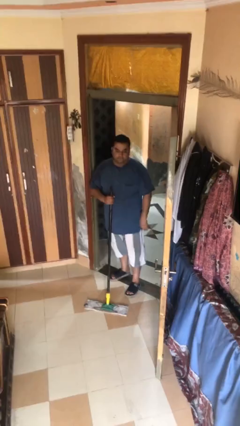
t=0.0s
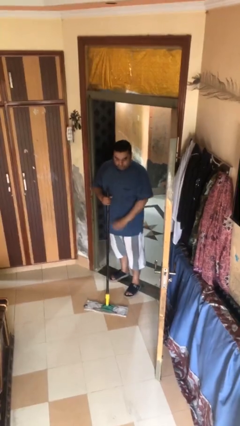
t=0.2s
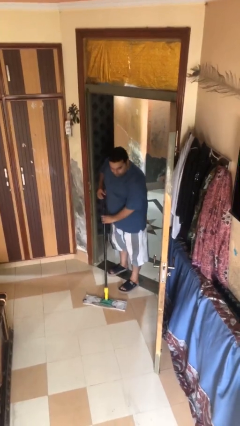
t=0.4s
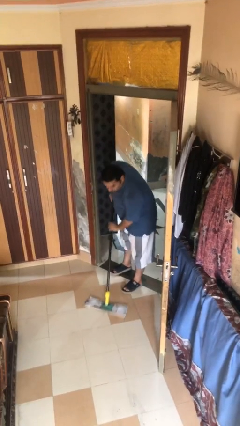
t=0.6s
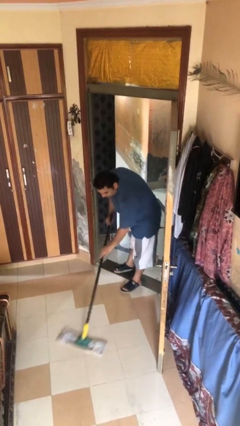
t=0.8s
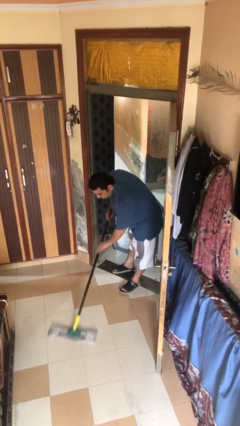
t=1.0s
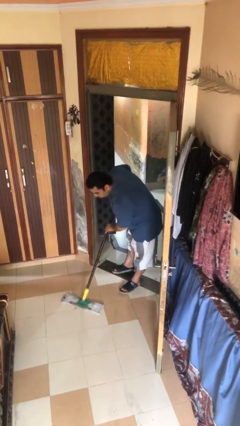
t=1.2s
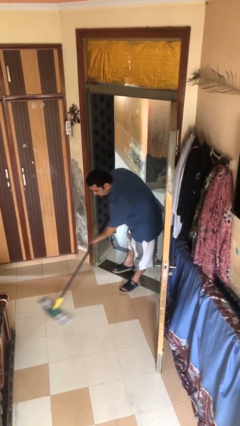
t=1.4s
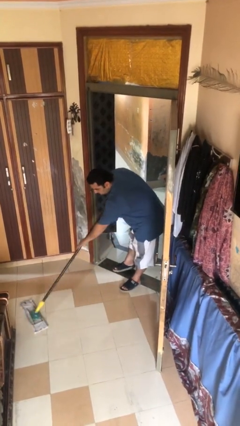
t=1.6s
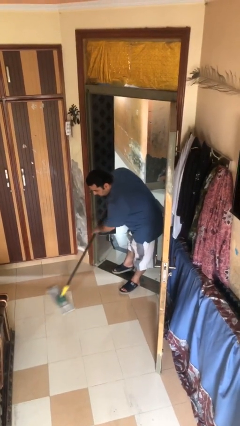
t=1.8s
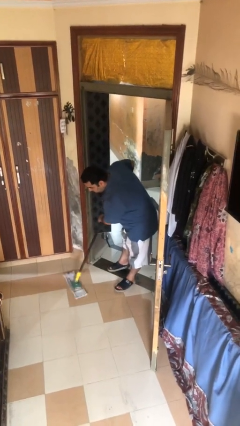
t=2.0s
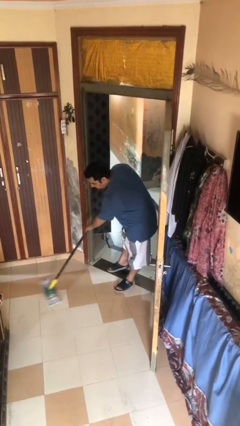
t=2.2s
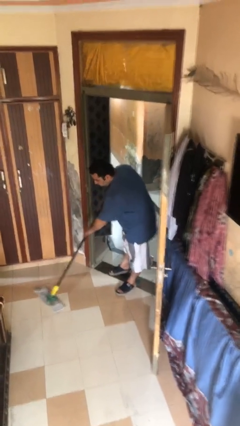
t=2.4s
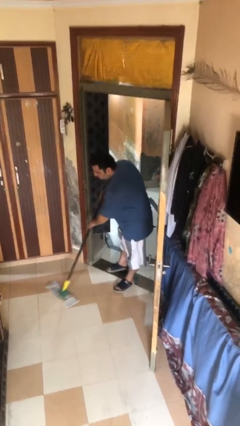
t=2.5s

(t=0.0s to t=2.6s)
person mops

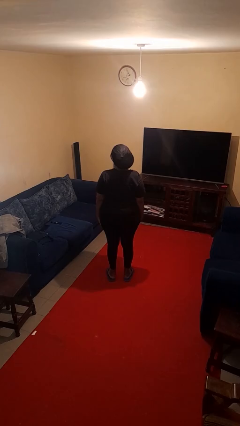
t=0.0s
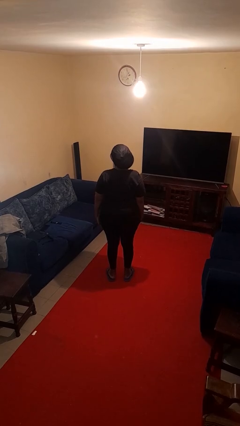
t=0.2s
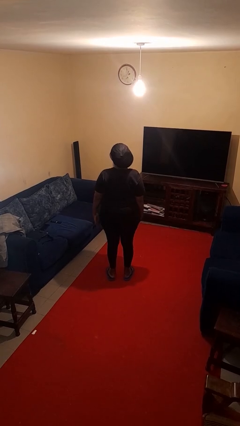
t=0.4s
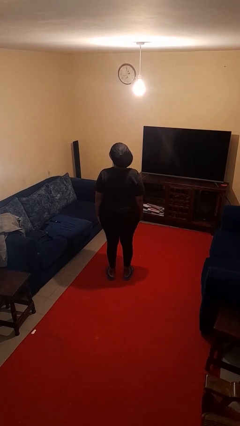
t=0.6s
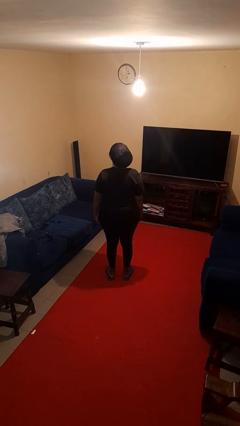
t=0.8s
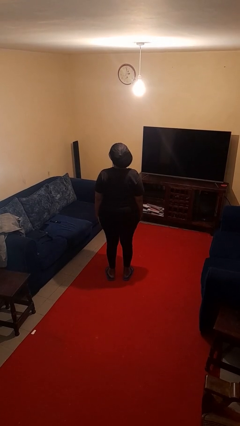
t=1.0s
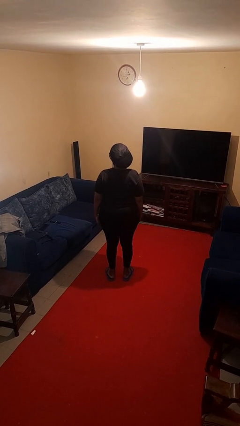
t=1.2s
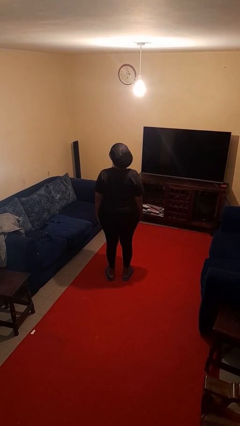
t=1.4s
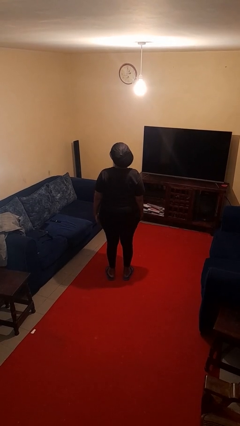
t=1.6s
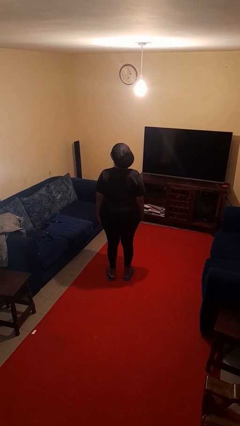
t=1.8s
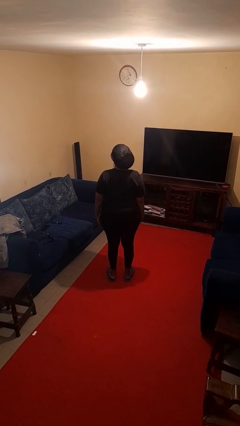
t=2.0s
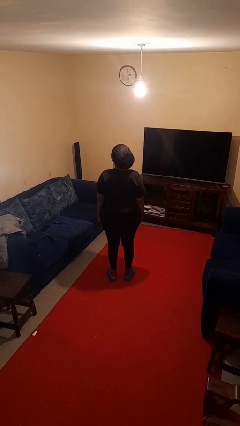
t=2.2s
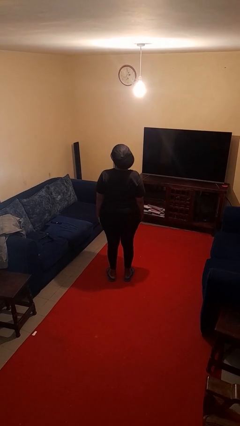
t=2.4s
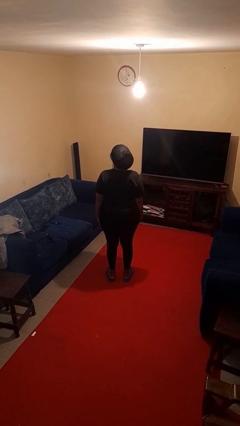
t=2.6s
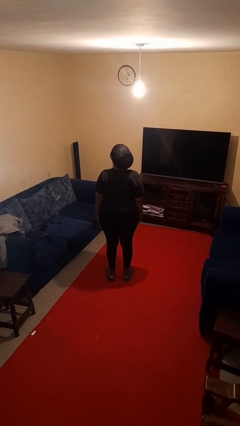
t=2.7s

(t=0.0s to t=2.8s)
person slaps hands on thighs

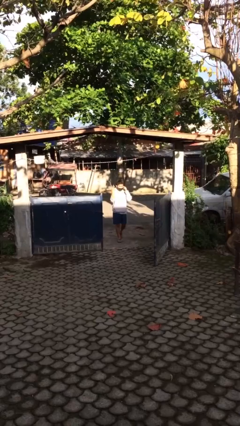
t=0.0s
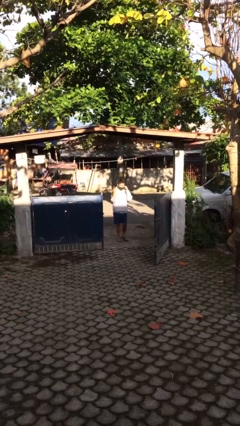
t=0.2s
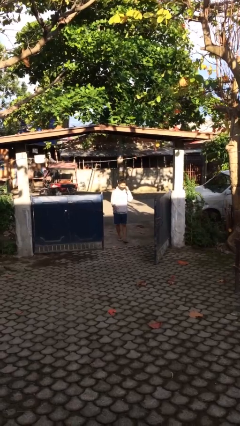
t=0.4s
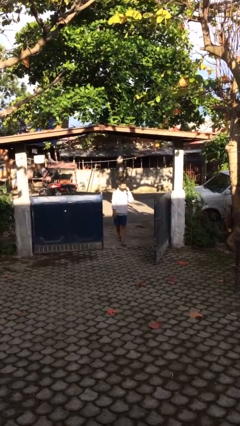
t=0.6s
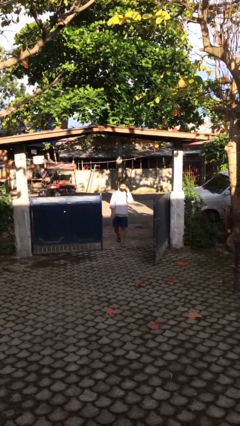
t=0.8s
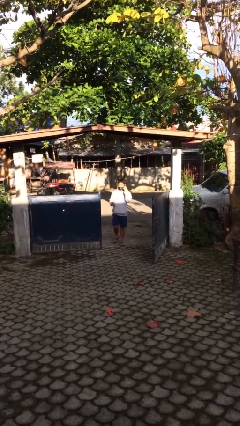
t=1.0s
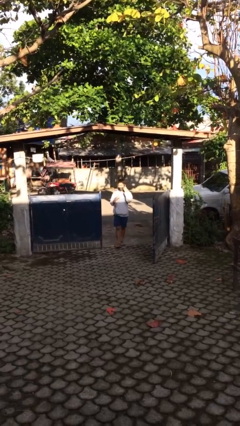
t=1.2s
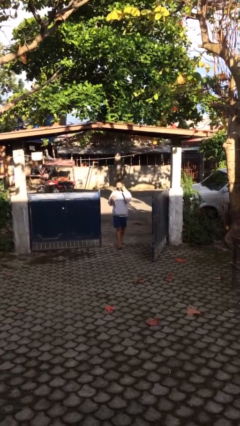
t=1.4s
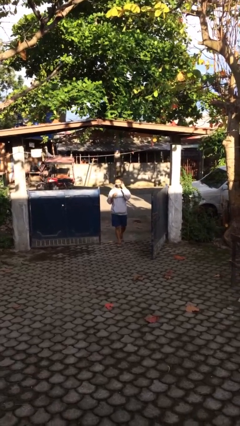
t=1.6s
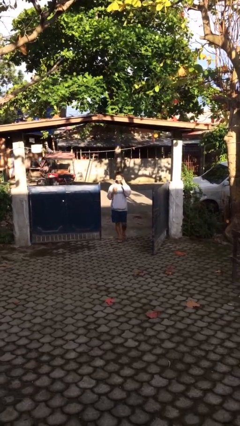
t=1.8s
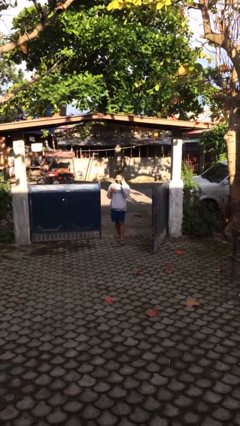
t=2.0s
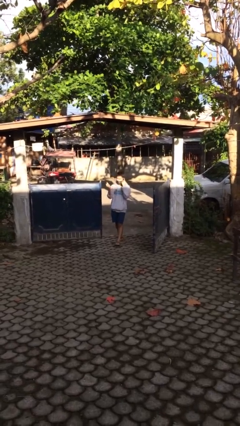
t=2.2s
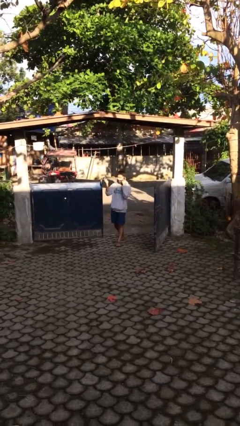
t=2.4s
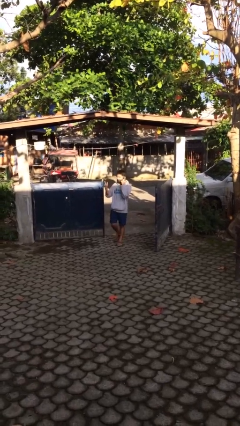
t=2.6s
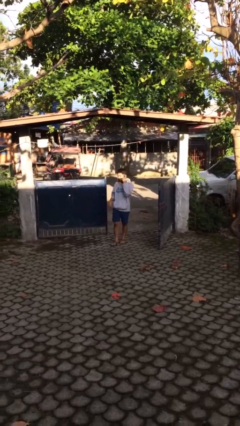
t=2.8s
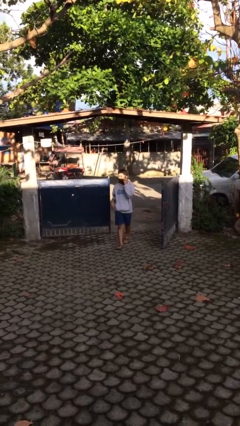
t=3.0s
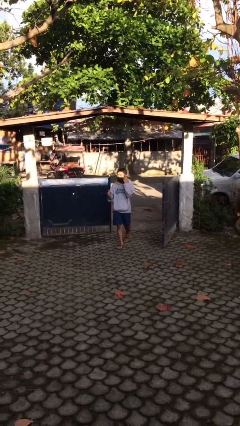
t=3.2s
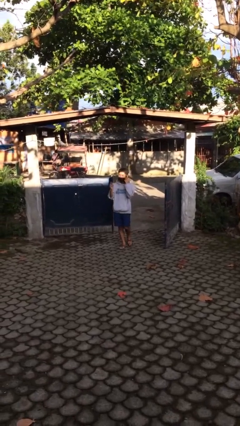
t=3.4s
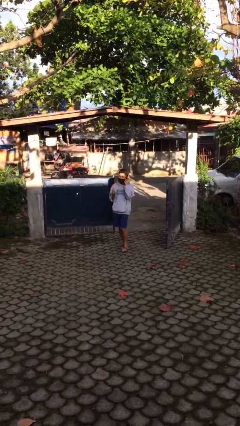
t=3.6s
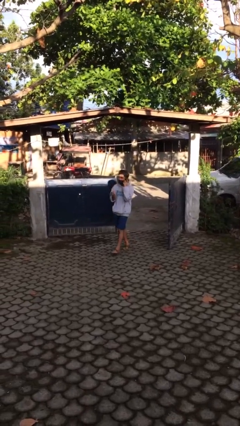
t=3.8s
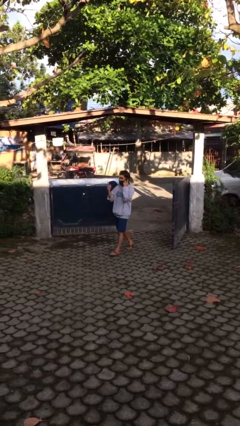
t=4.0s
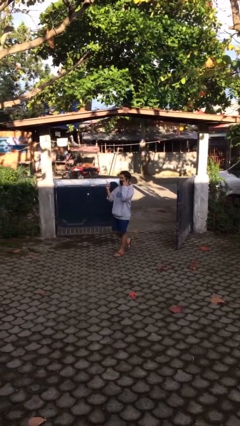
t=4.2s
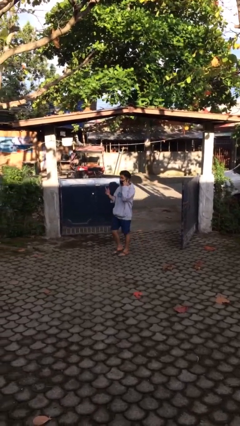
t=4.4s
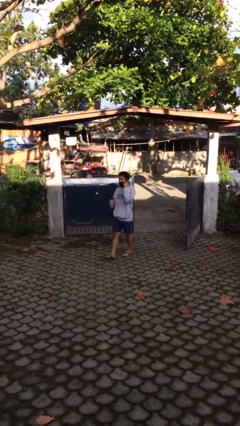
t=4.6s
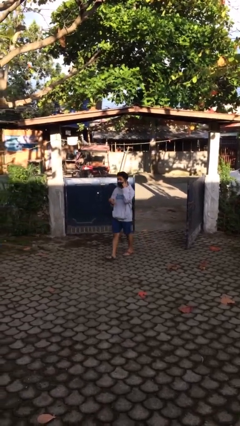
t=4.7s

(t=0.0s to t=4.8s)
person enters scene through structure

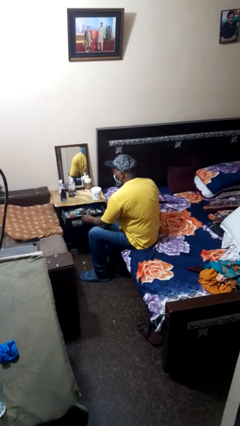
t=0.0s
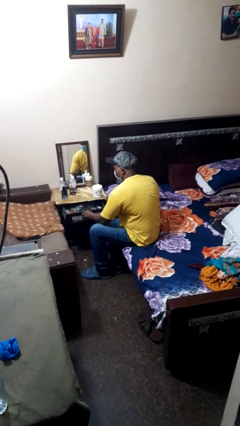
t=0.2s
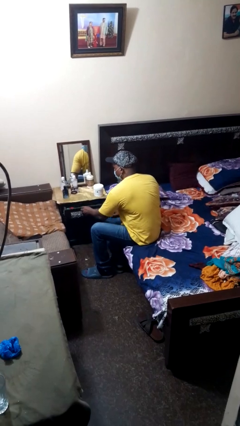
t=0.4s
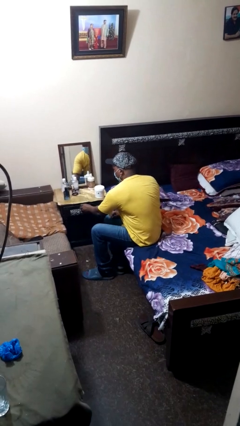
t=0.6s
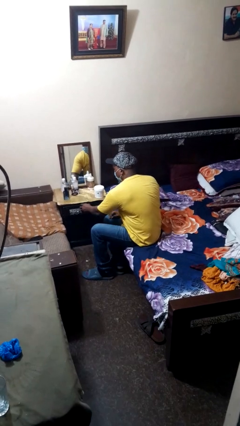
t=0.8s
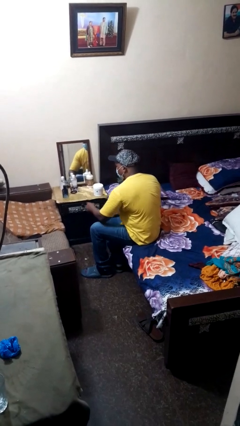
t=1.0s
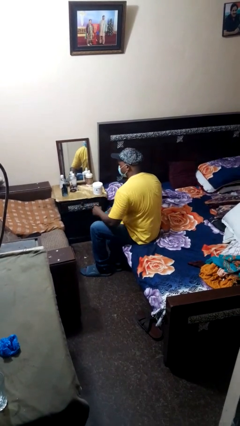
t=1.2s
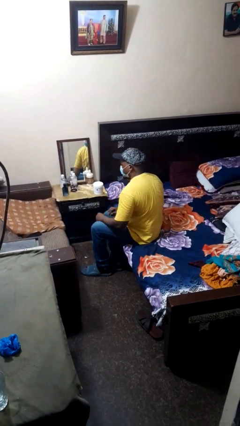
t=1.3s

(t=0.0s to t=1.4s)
person closes dresser drawer

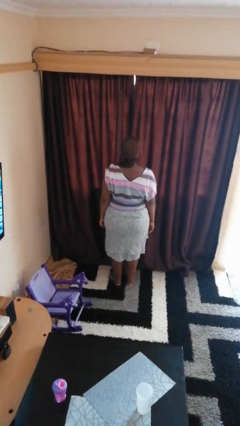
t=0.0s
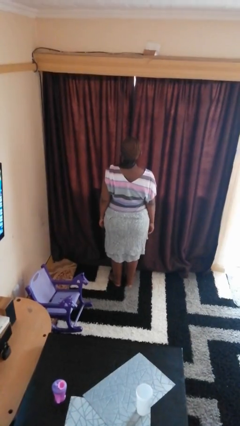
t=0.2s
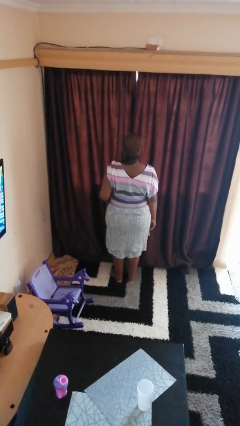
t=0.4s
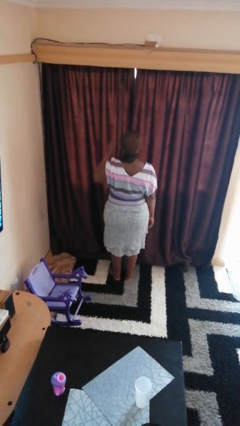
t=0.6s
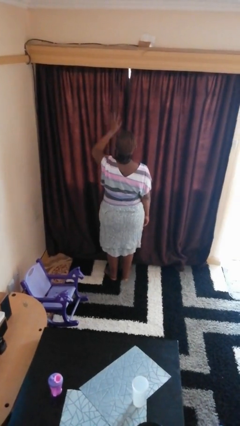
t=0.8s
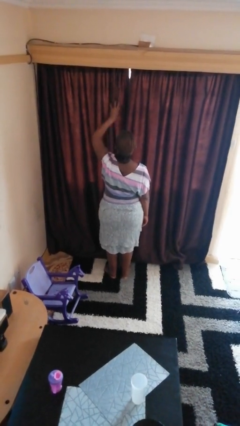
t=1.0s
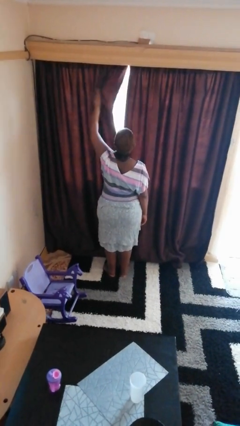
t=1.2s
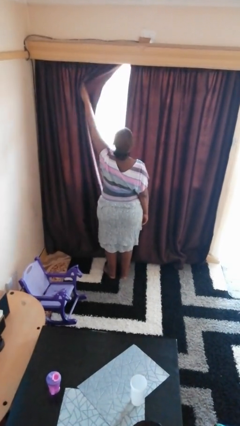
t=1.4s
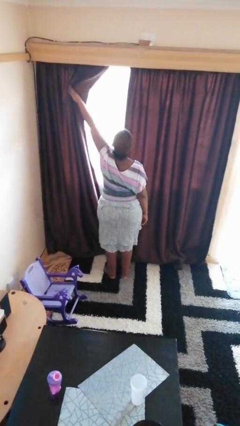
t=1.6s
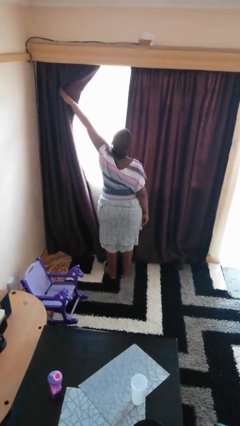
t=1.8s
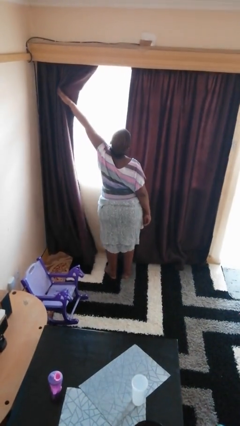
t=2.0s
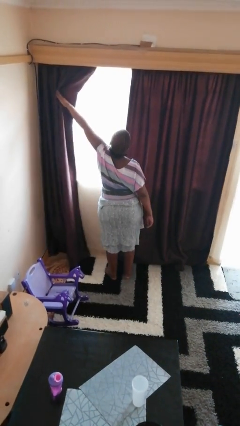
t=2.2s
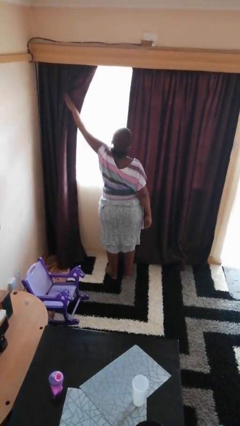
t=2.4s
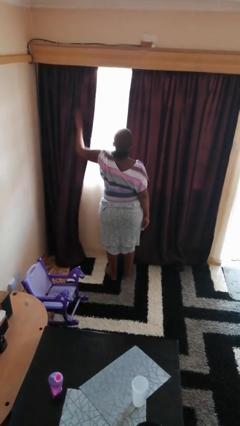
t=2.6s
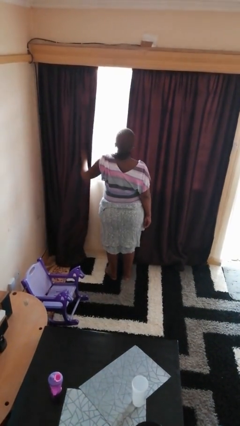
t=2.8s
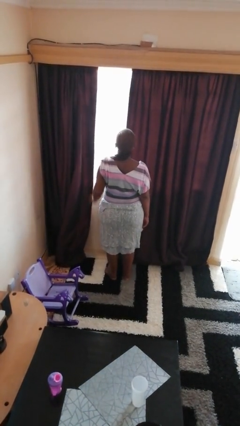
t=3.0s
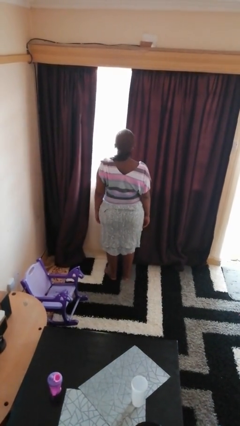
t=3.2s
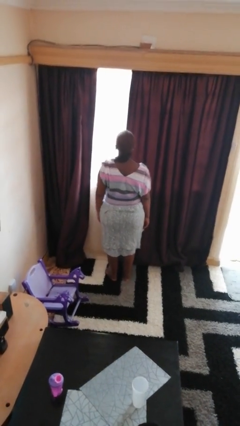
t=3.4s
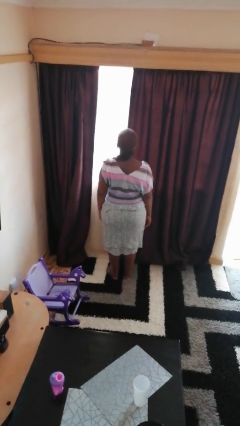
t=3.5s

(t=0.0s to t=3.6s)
person opens curtains

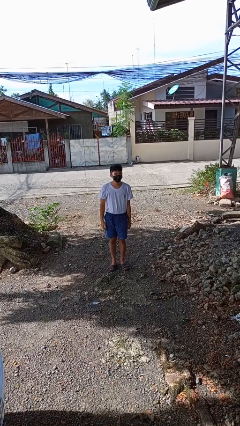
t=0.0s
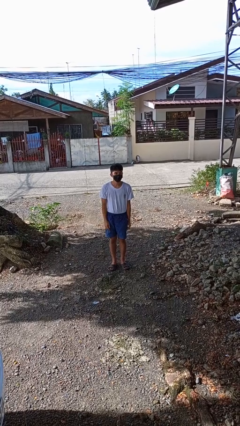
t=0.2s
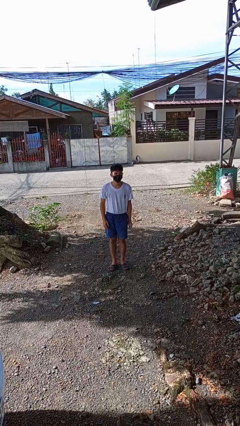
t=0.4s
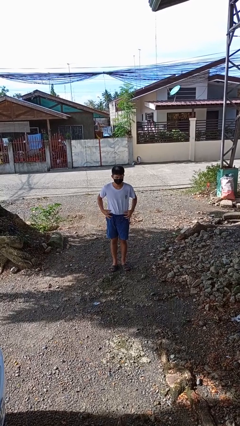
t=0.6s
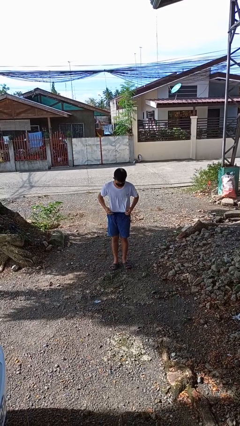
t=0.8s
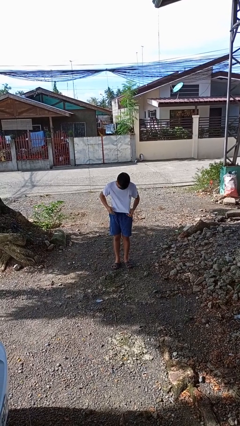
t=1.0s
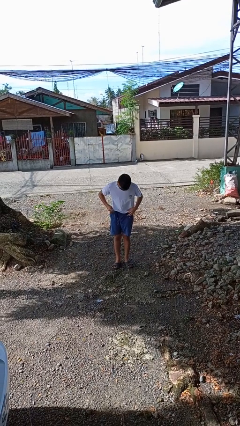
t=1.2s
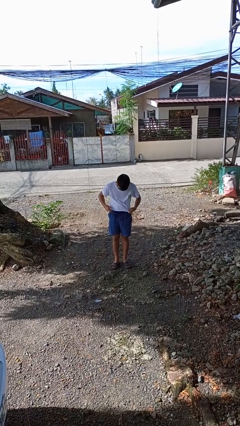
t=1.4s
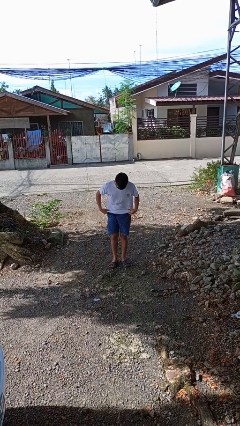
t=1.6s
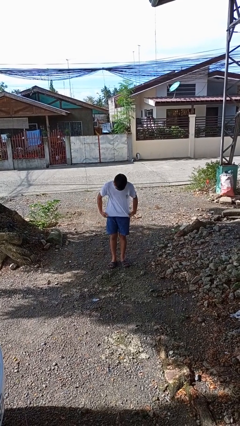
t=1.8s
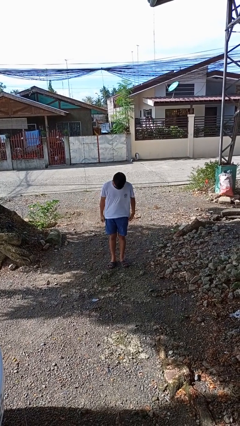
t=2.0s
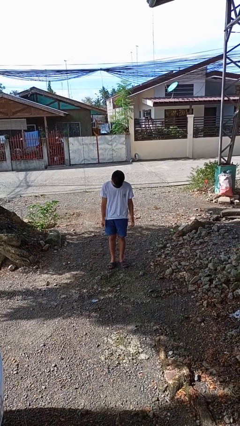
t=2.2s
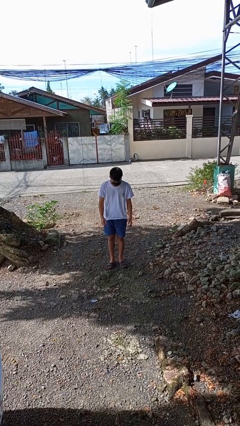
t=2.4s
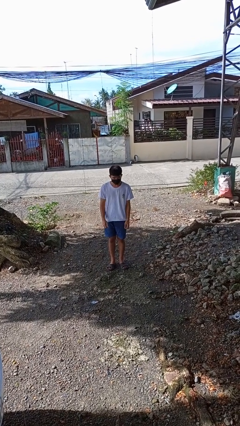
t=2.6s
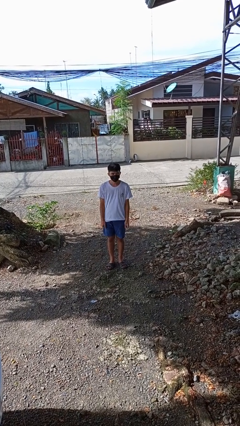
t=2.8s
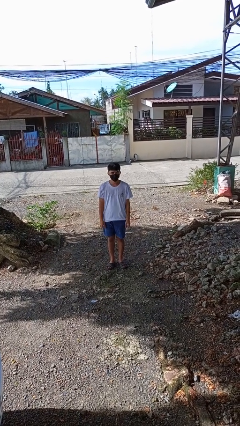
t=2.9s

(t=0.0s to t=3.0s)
person untucks shirt
